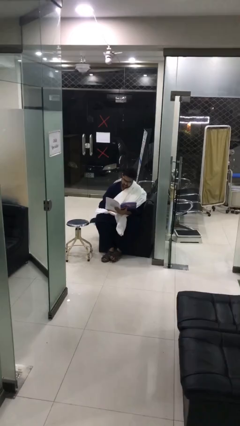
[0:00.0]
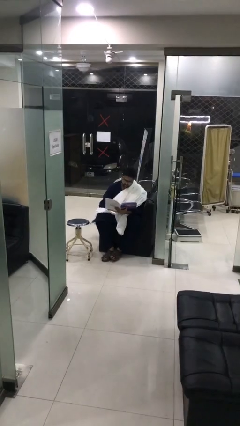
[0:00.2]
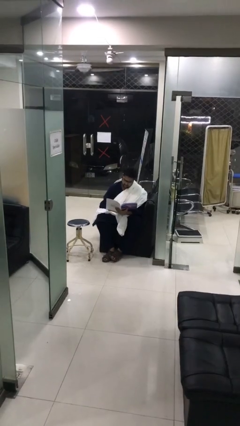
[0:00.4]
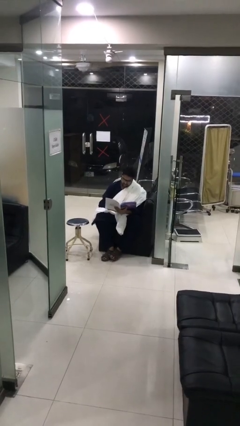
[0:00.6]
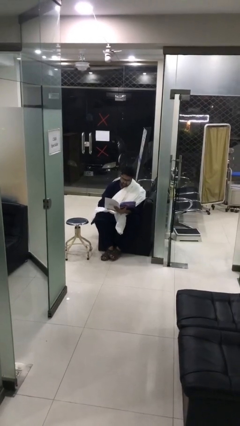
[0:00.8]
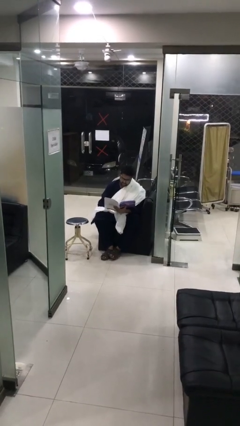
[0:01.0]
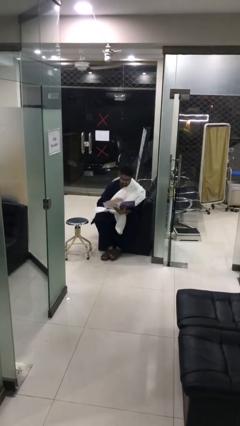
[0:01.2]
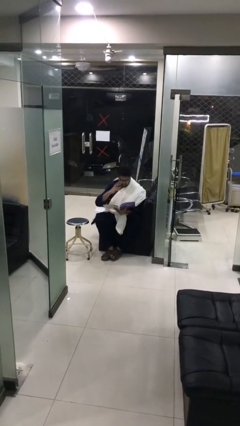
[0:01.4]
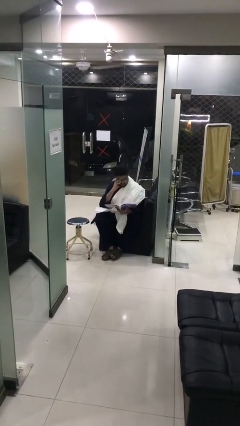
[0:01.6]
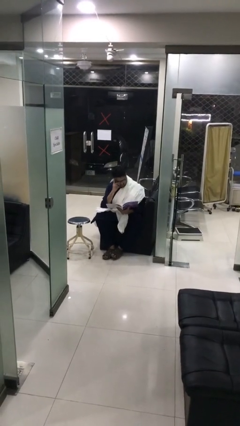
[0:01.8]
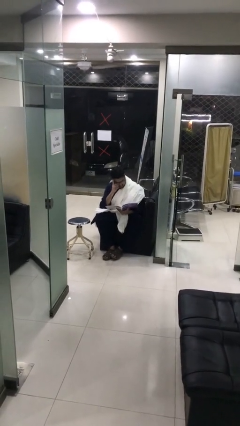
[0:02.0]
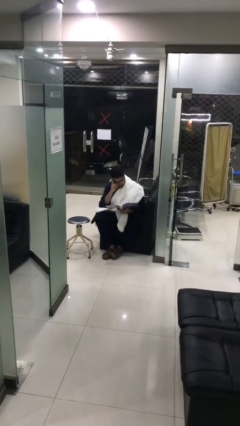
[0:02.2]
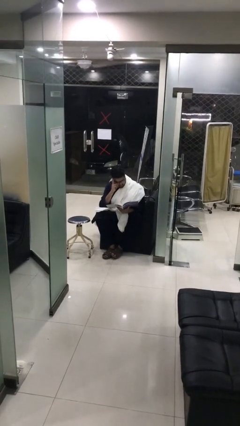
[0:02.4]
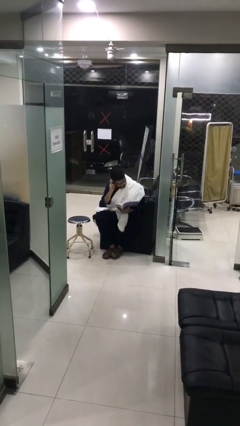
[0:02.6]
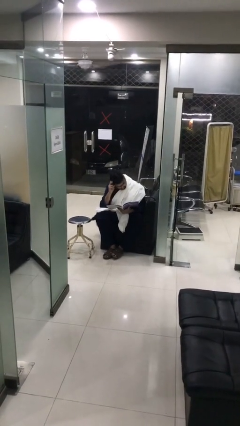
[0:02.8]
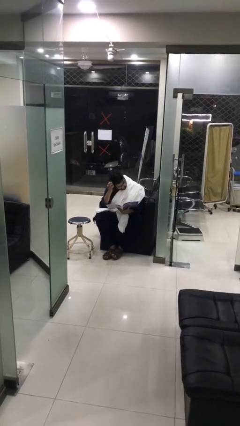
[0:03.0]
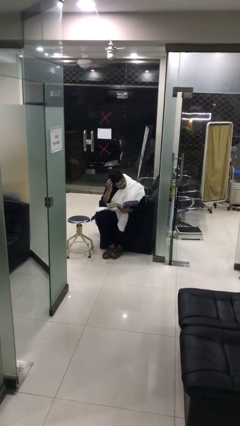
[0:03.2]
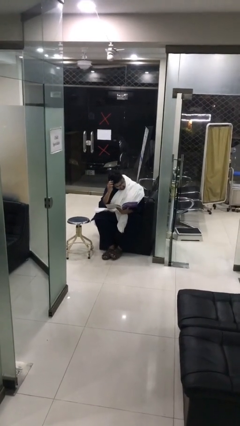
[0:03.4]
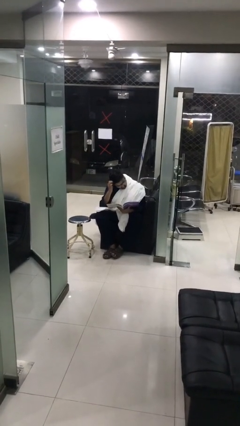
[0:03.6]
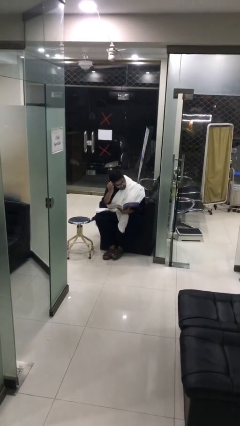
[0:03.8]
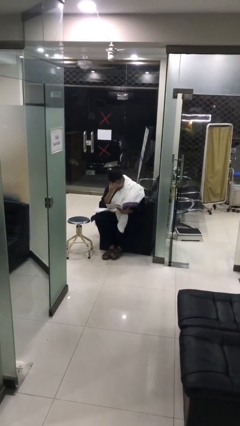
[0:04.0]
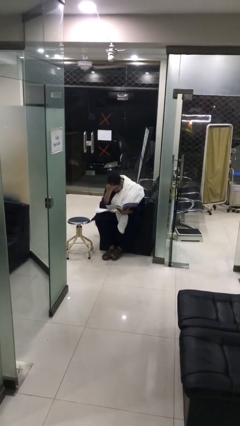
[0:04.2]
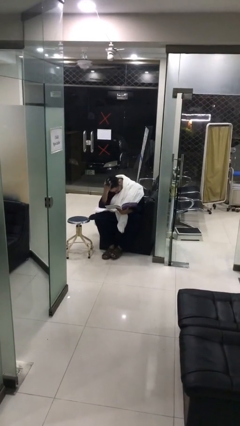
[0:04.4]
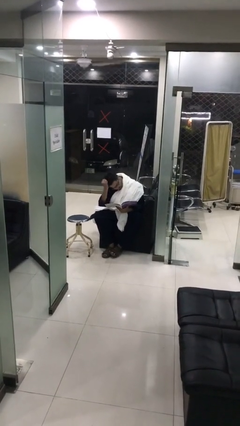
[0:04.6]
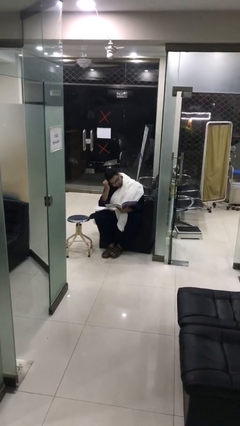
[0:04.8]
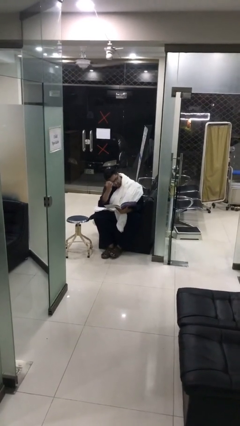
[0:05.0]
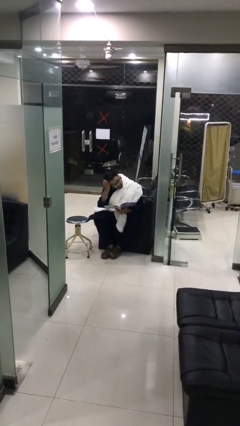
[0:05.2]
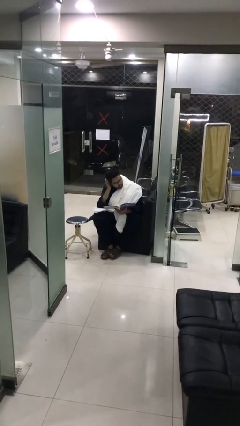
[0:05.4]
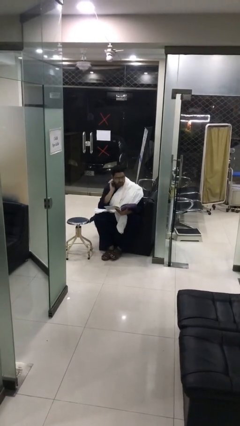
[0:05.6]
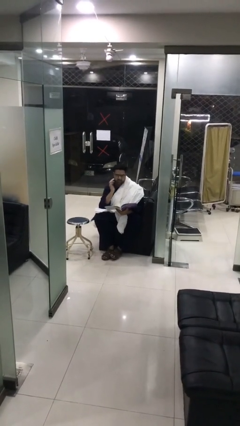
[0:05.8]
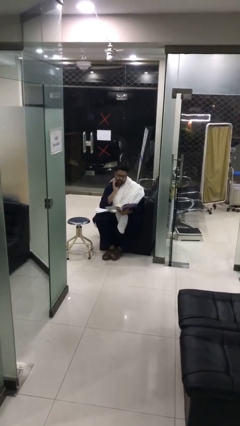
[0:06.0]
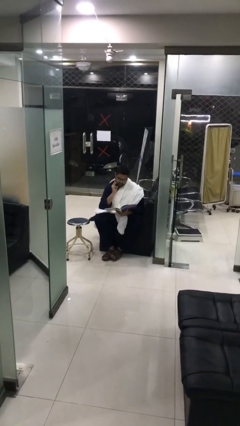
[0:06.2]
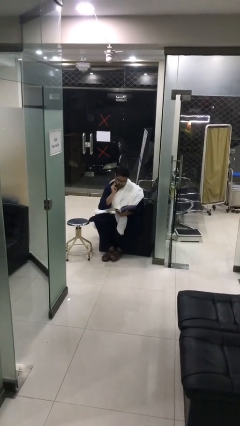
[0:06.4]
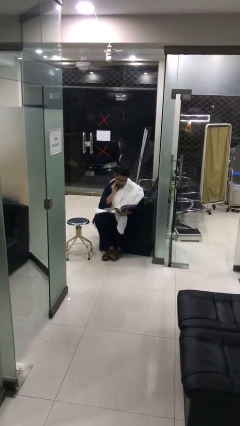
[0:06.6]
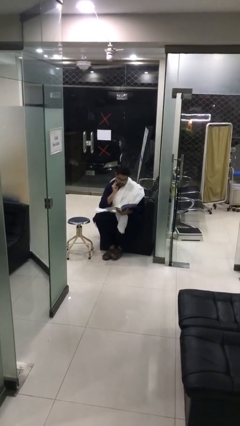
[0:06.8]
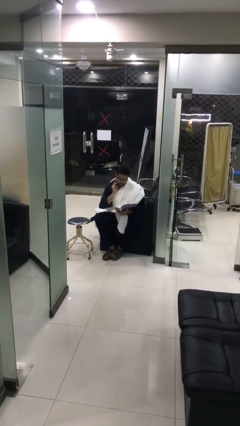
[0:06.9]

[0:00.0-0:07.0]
person reads document

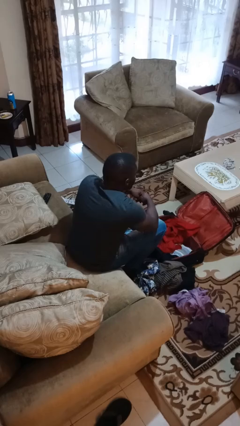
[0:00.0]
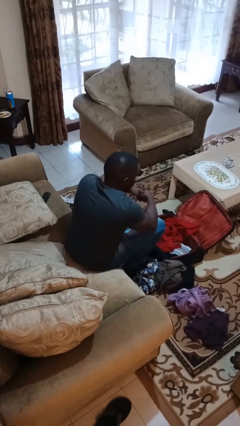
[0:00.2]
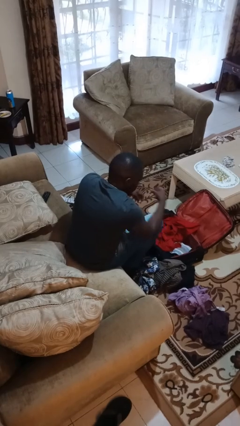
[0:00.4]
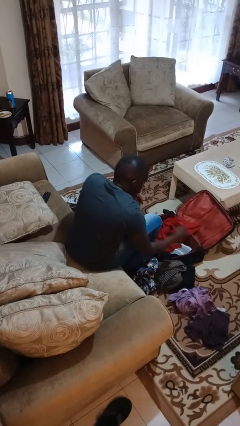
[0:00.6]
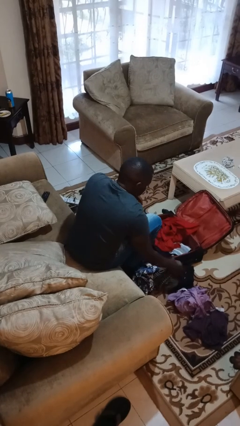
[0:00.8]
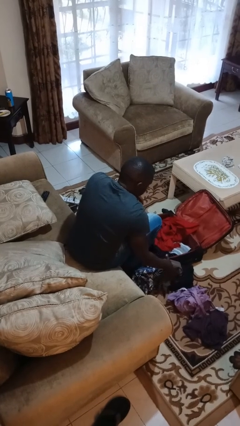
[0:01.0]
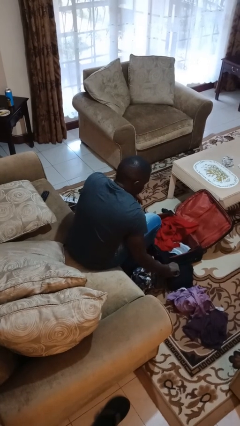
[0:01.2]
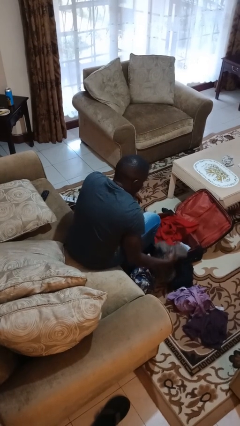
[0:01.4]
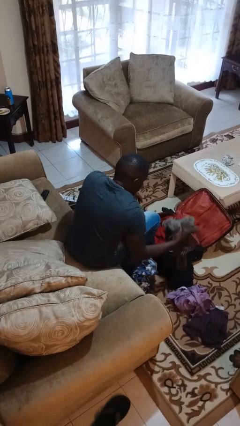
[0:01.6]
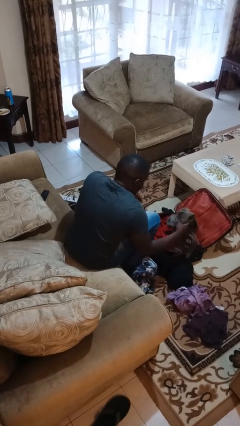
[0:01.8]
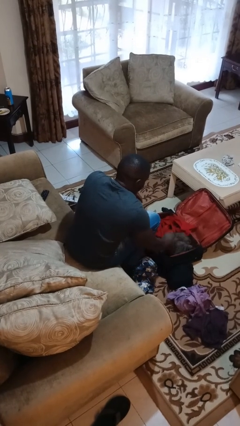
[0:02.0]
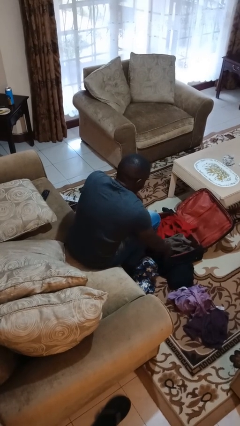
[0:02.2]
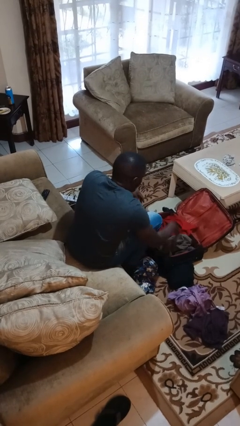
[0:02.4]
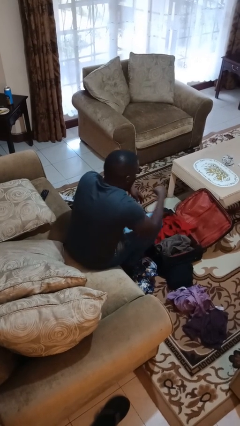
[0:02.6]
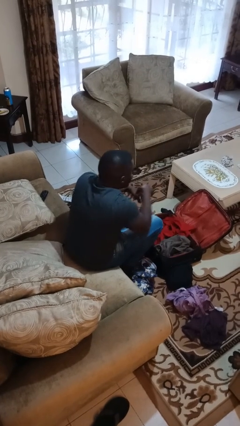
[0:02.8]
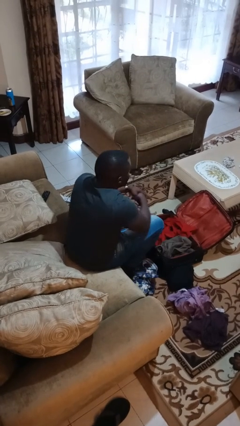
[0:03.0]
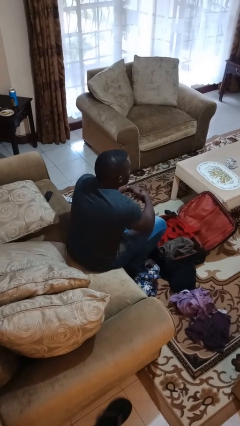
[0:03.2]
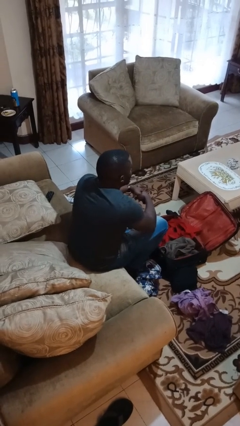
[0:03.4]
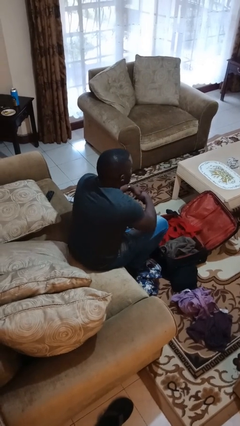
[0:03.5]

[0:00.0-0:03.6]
person loads clothes into suitcase

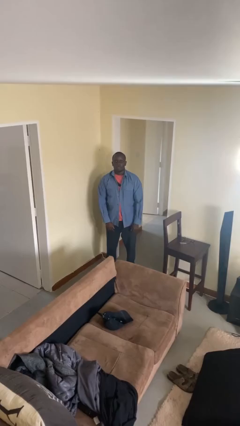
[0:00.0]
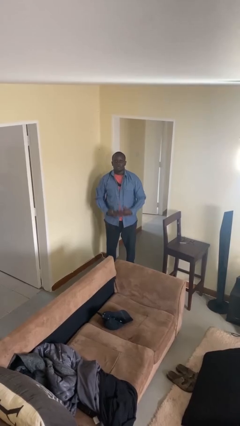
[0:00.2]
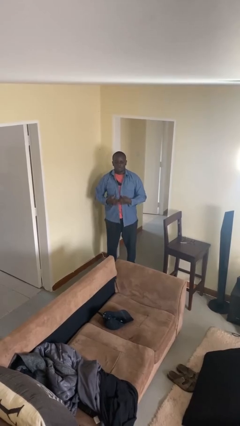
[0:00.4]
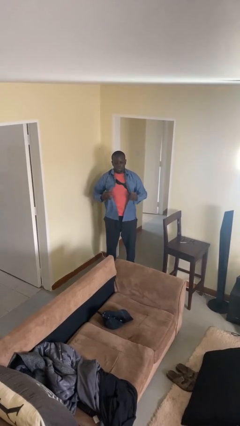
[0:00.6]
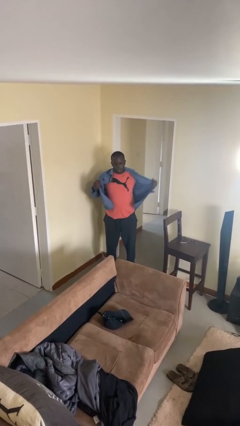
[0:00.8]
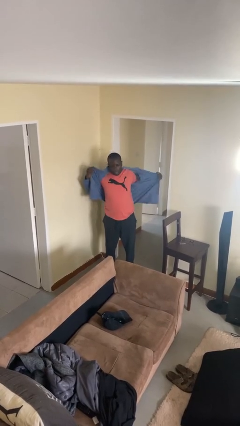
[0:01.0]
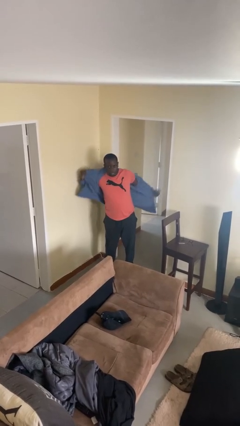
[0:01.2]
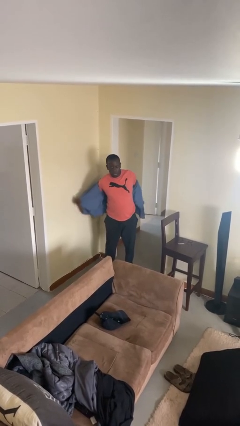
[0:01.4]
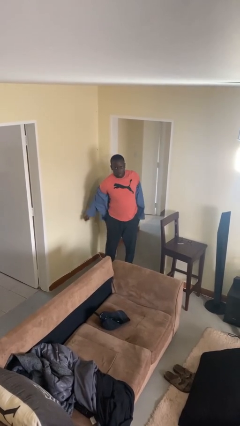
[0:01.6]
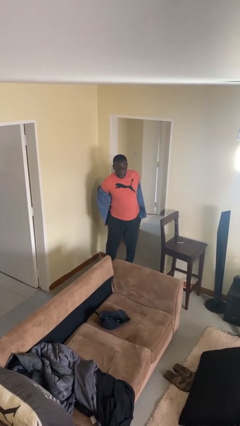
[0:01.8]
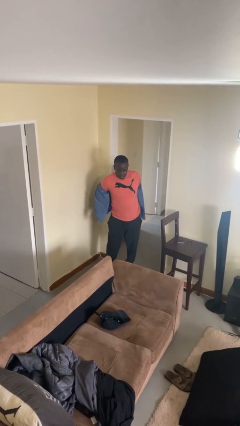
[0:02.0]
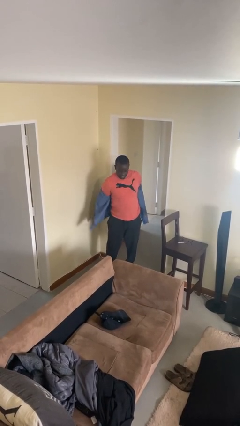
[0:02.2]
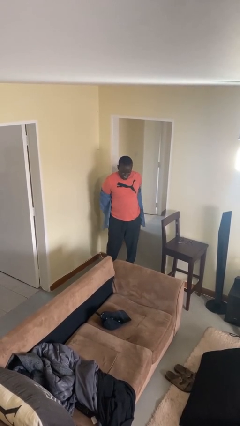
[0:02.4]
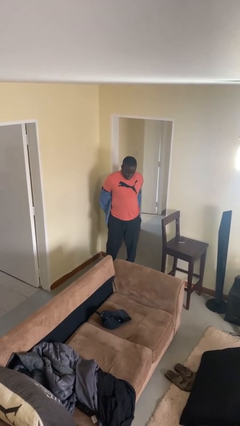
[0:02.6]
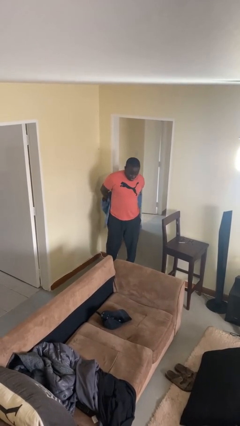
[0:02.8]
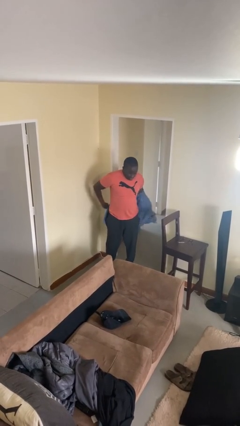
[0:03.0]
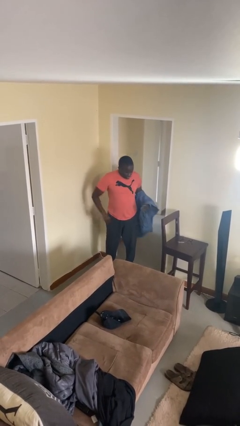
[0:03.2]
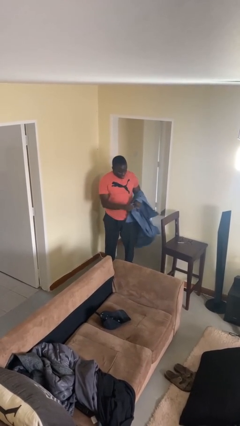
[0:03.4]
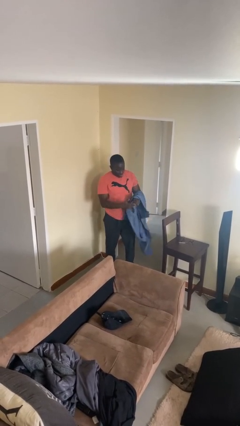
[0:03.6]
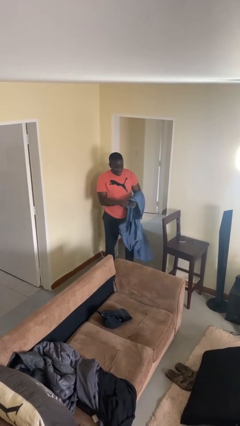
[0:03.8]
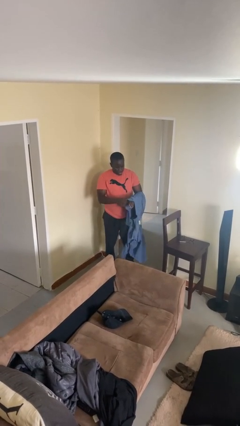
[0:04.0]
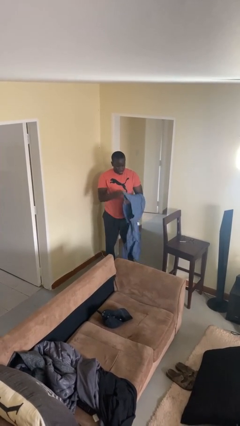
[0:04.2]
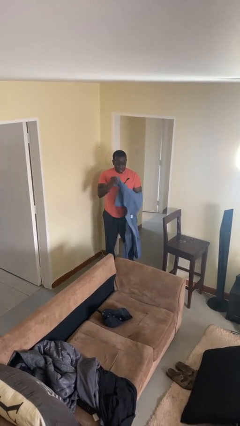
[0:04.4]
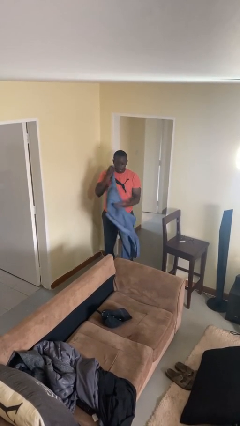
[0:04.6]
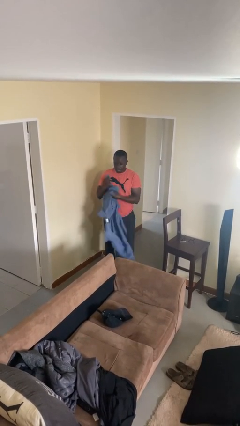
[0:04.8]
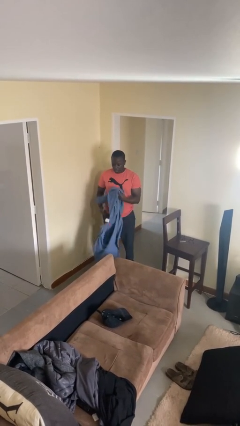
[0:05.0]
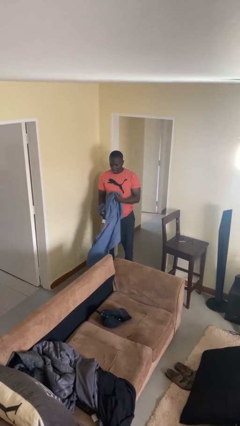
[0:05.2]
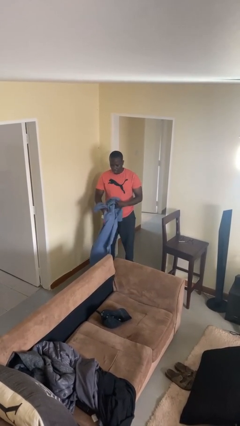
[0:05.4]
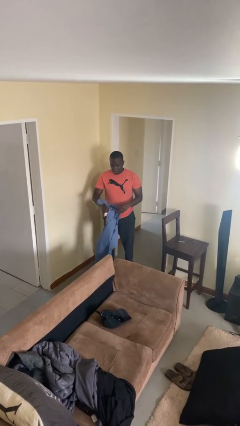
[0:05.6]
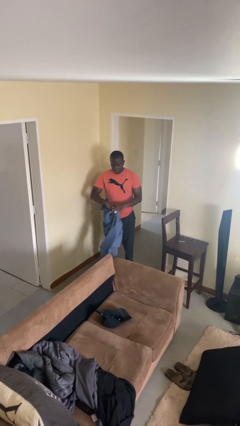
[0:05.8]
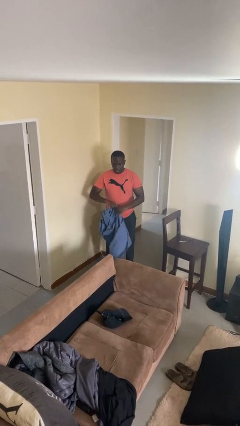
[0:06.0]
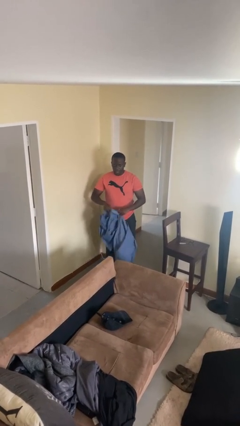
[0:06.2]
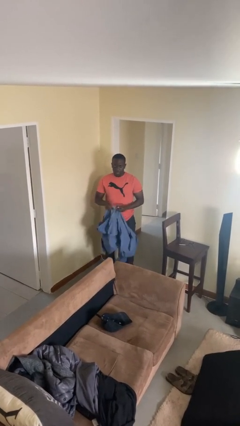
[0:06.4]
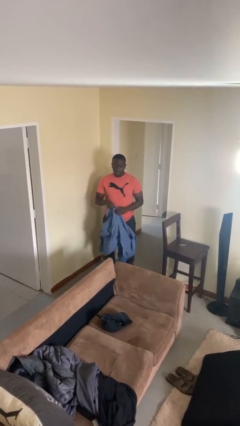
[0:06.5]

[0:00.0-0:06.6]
person takes off shirt

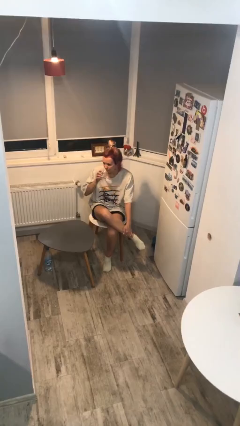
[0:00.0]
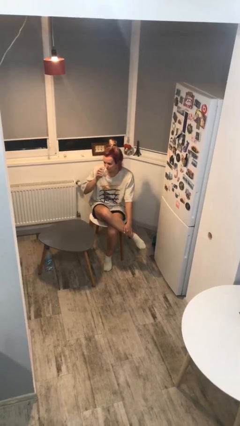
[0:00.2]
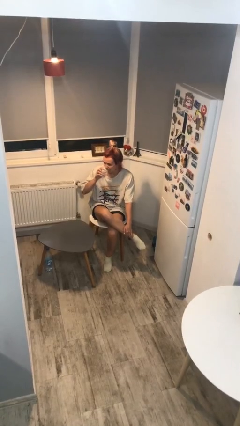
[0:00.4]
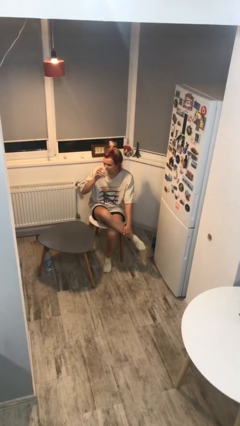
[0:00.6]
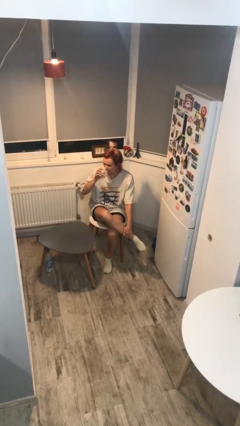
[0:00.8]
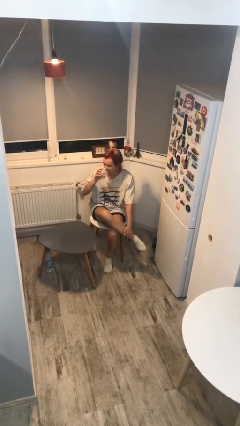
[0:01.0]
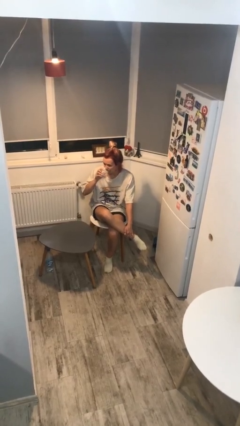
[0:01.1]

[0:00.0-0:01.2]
person drinks from mug
